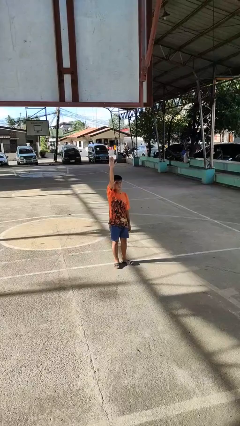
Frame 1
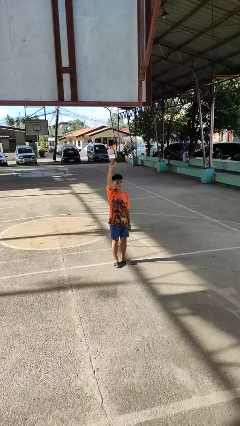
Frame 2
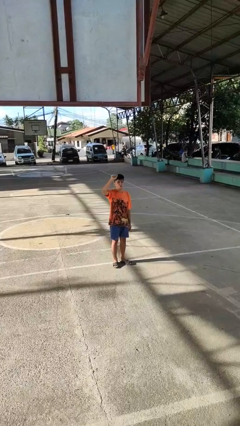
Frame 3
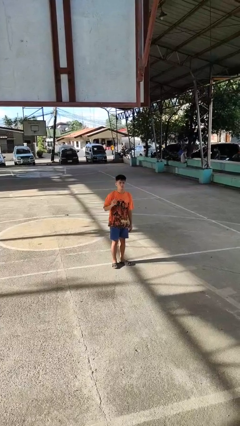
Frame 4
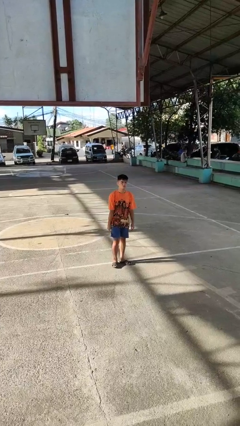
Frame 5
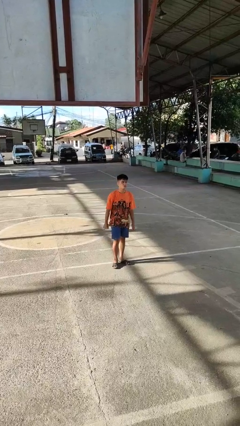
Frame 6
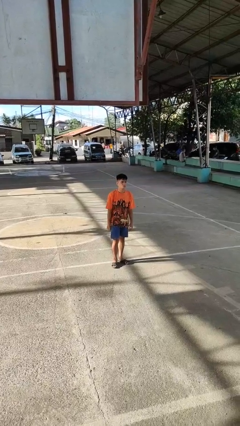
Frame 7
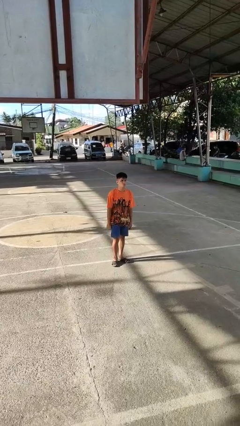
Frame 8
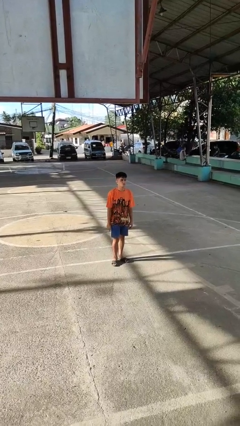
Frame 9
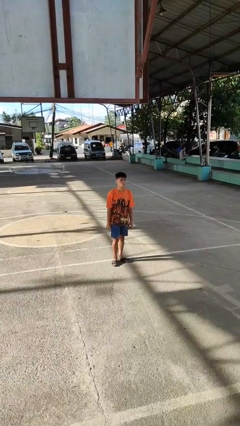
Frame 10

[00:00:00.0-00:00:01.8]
person gestures lower hand

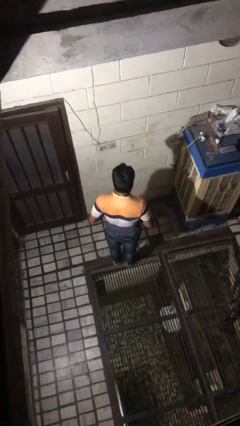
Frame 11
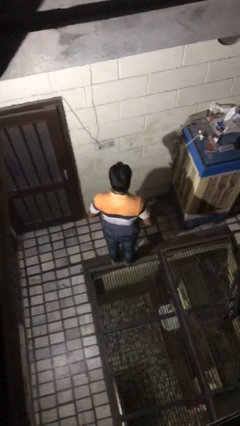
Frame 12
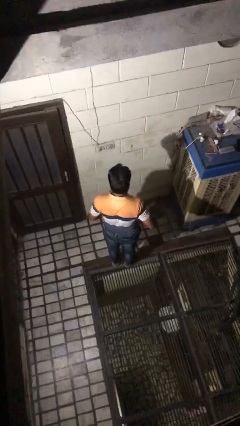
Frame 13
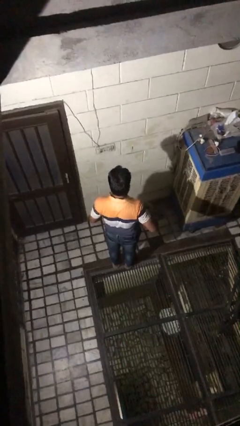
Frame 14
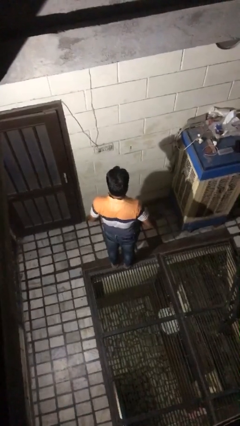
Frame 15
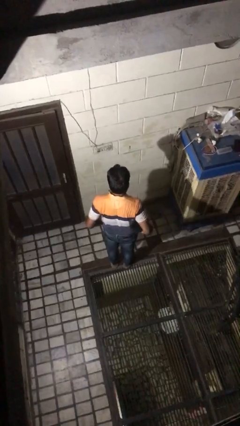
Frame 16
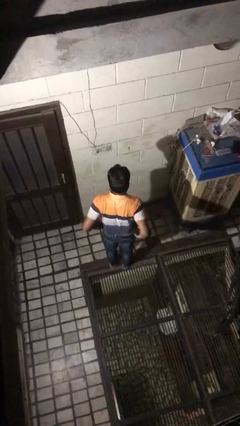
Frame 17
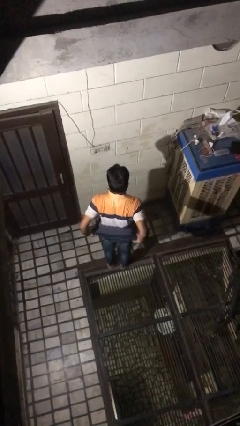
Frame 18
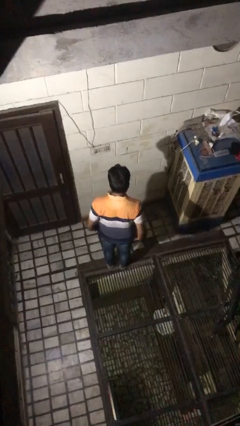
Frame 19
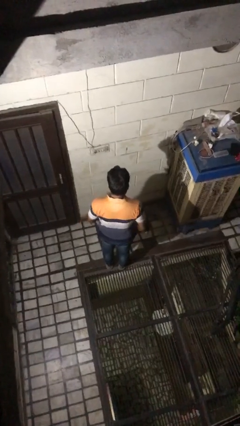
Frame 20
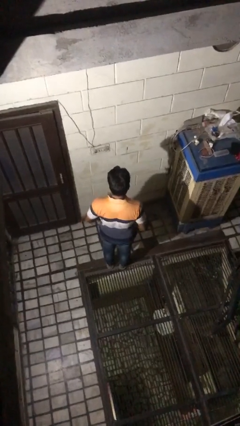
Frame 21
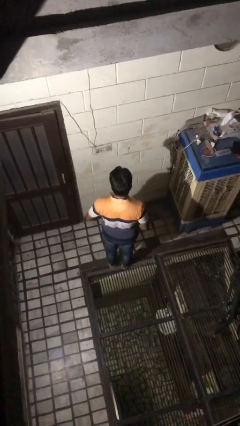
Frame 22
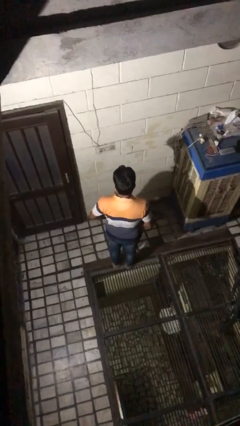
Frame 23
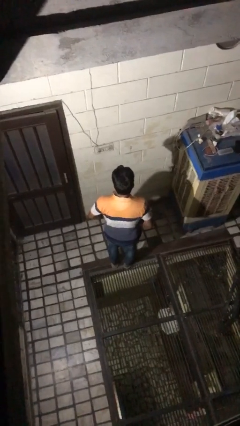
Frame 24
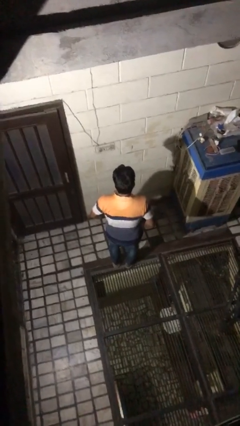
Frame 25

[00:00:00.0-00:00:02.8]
person untucks shirt

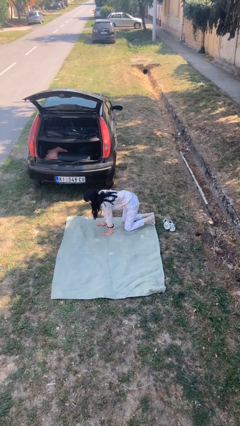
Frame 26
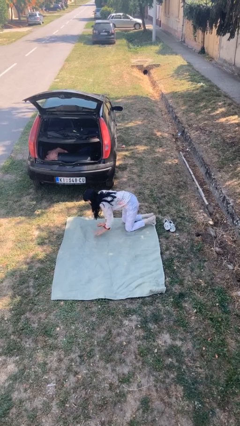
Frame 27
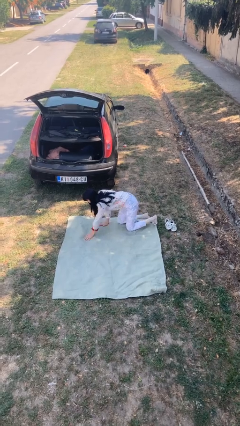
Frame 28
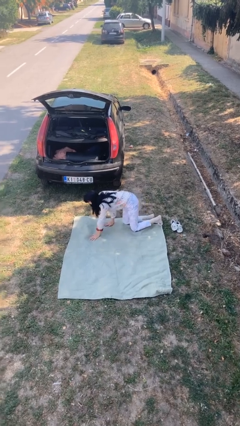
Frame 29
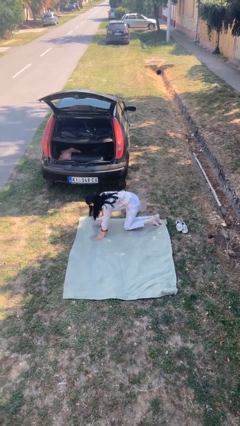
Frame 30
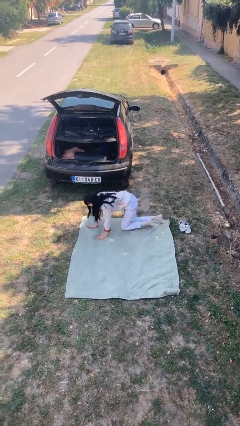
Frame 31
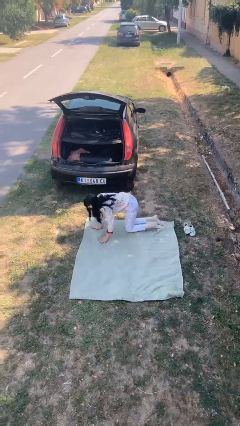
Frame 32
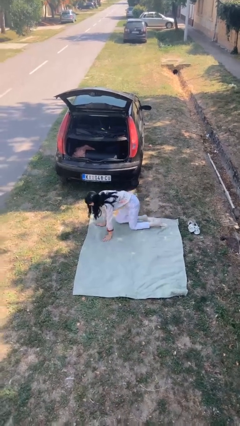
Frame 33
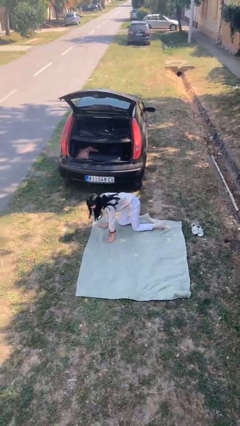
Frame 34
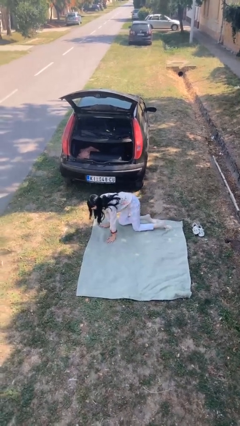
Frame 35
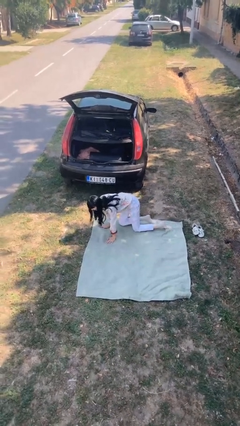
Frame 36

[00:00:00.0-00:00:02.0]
person crawls

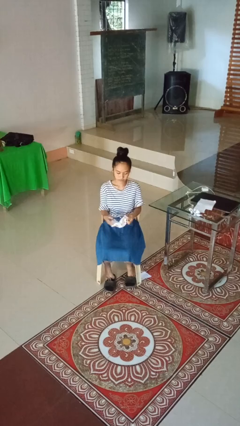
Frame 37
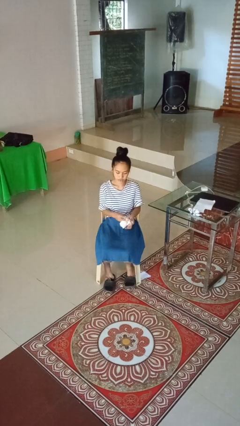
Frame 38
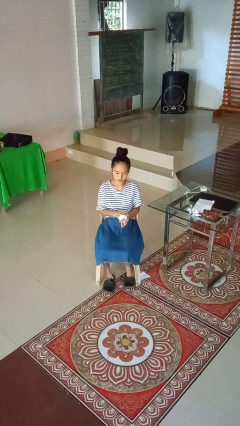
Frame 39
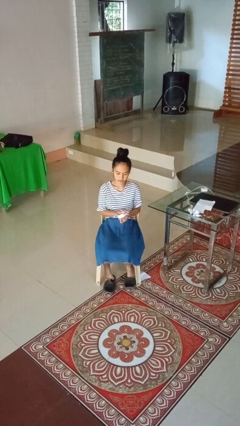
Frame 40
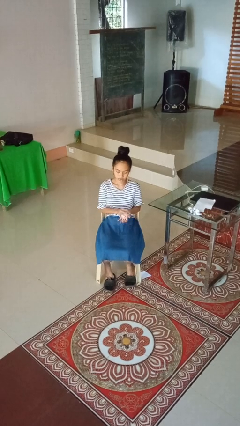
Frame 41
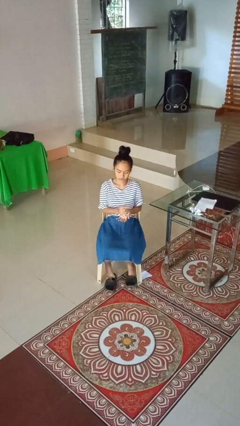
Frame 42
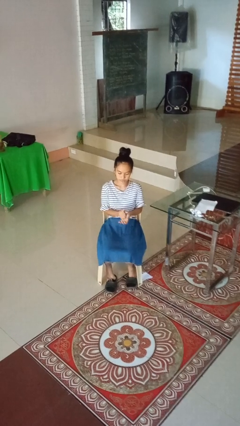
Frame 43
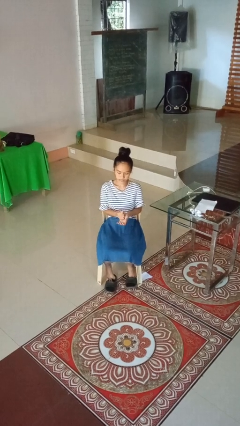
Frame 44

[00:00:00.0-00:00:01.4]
person crumples paper

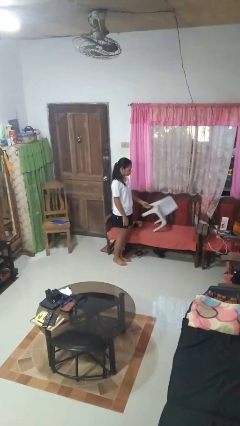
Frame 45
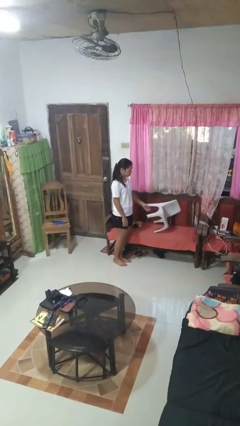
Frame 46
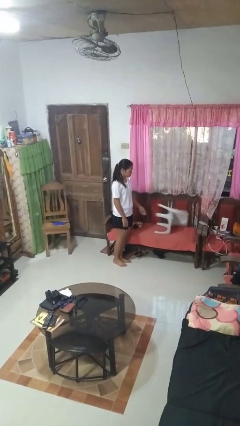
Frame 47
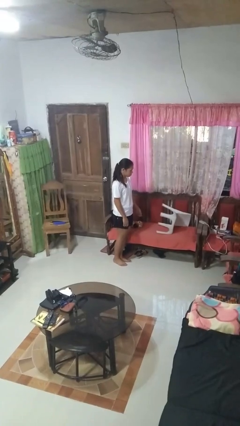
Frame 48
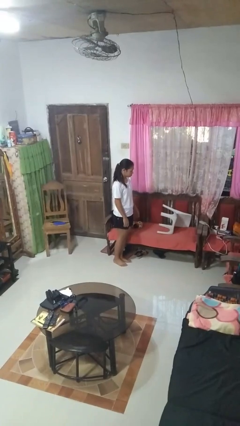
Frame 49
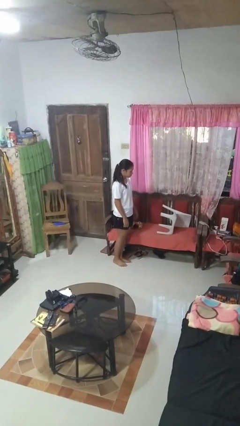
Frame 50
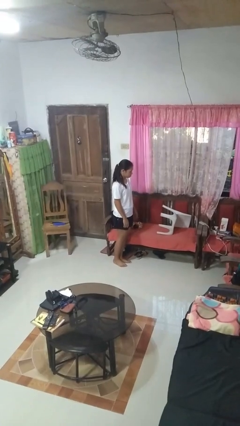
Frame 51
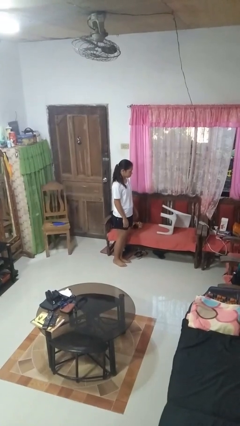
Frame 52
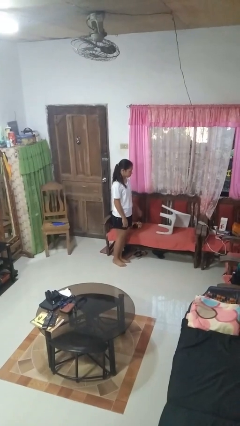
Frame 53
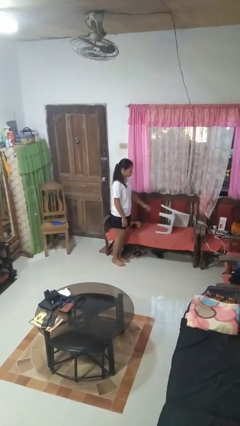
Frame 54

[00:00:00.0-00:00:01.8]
person knocks over furniture

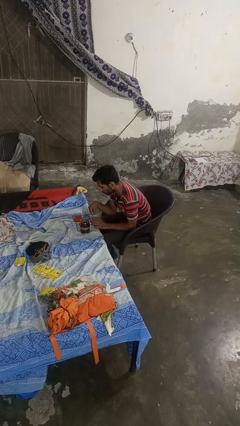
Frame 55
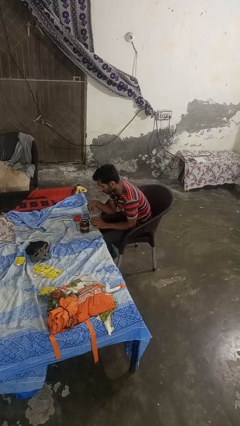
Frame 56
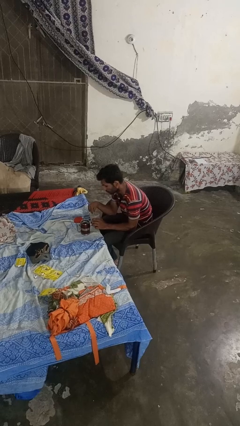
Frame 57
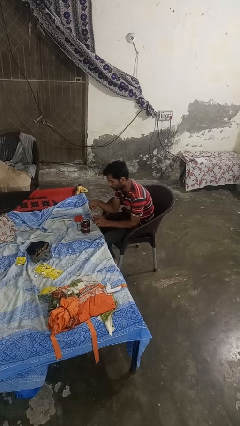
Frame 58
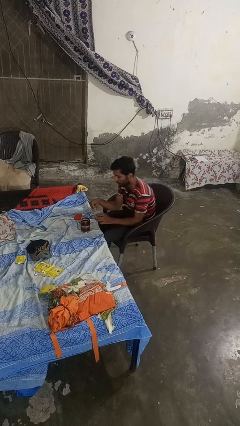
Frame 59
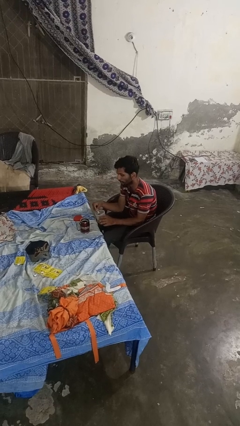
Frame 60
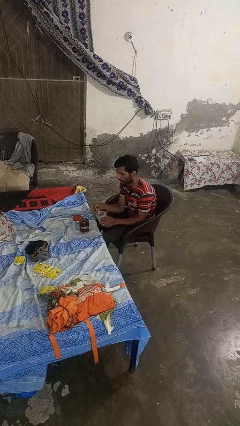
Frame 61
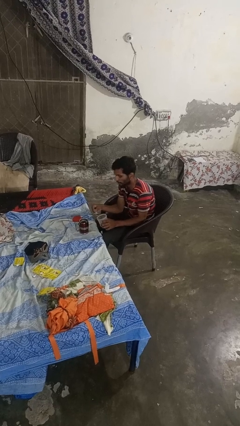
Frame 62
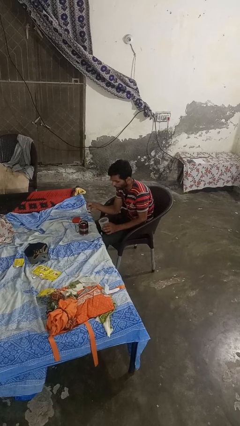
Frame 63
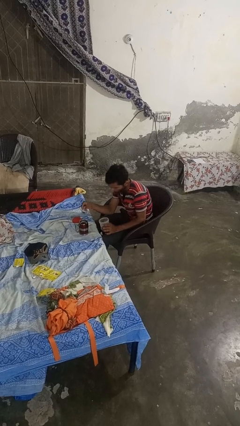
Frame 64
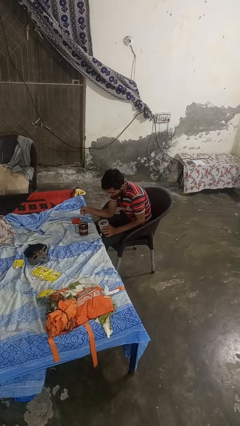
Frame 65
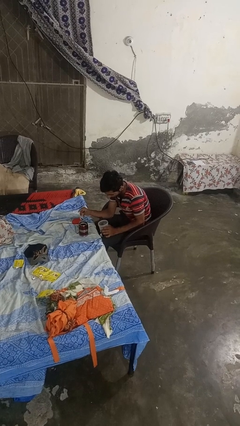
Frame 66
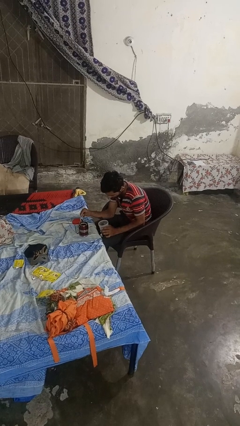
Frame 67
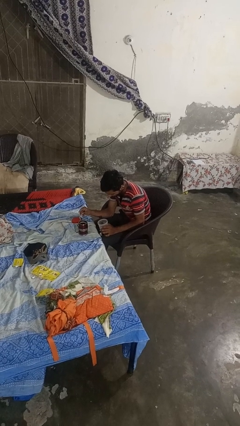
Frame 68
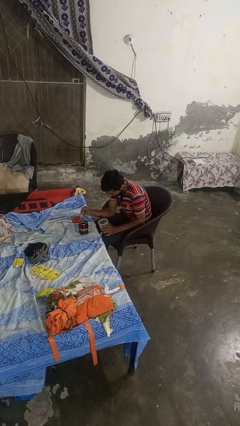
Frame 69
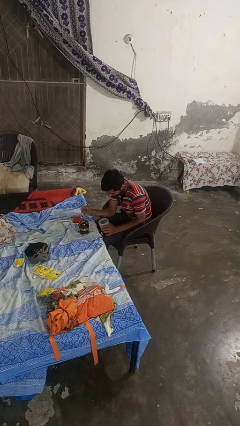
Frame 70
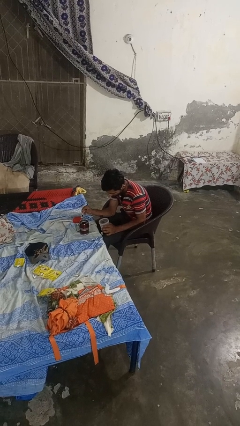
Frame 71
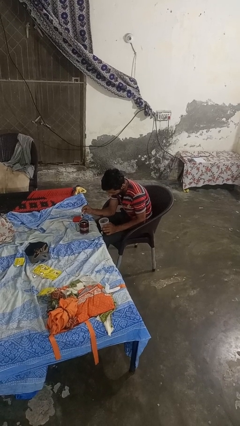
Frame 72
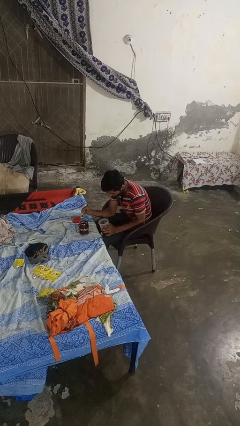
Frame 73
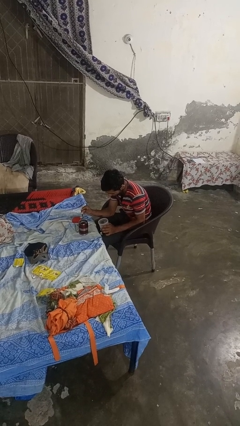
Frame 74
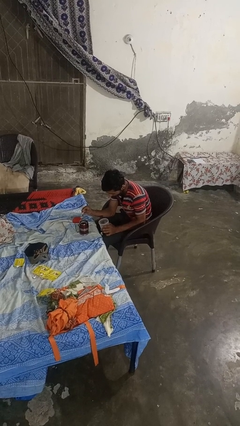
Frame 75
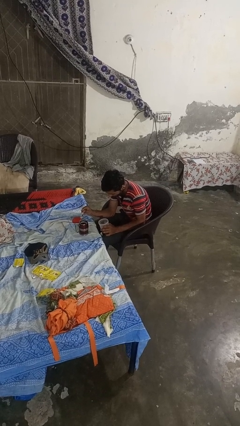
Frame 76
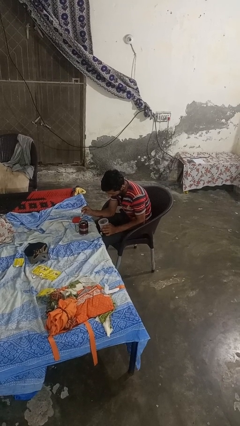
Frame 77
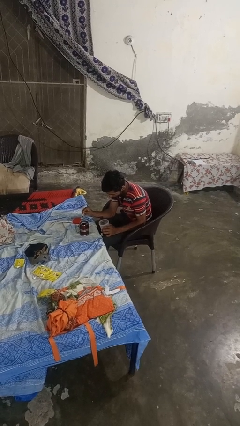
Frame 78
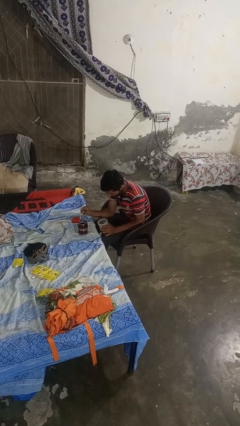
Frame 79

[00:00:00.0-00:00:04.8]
person pours coffee into mug

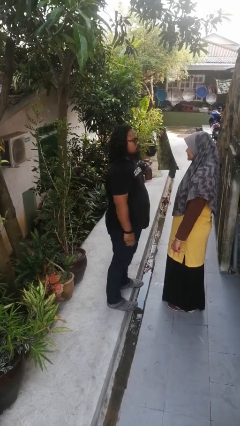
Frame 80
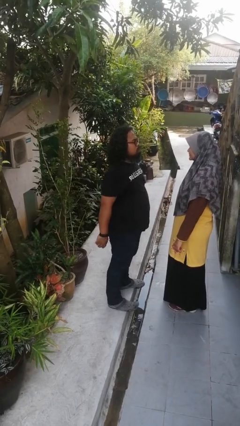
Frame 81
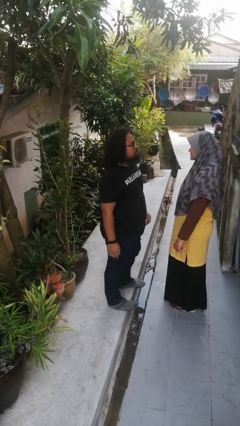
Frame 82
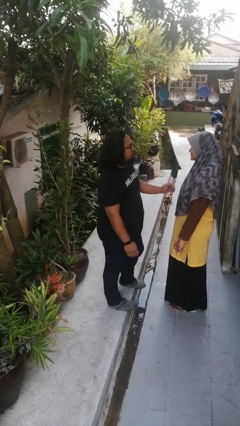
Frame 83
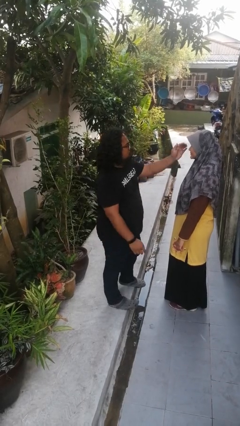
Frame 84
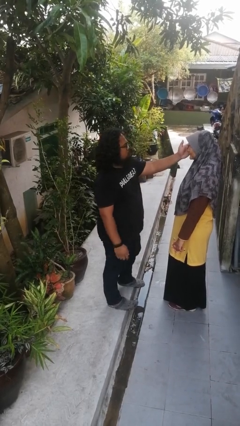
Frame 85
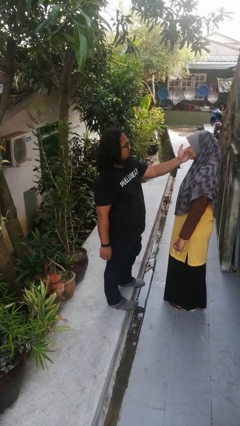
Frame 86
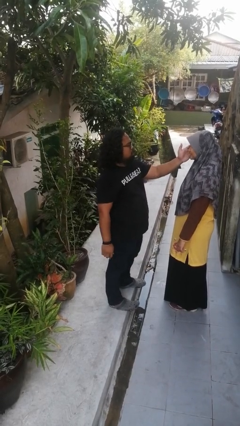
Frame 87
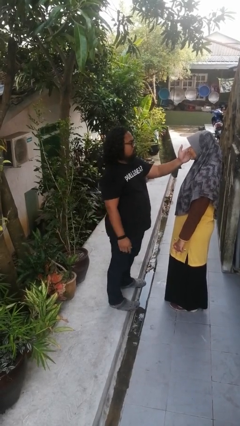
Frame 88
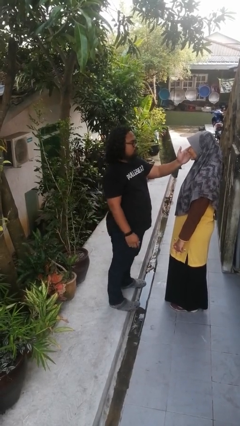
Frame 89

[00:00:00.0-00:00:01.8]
person touches face of person

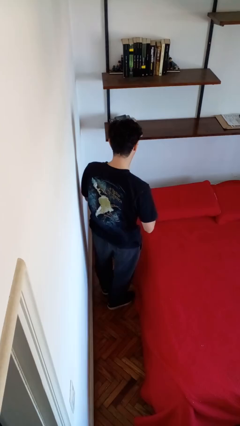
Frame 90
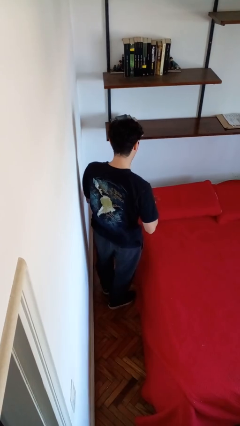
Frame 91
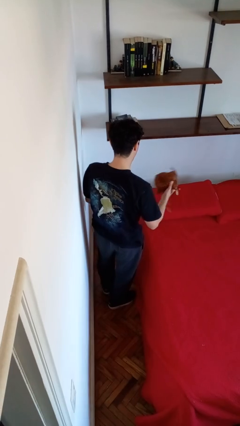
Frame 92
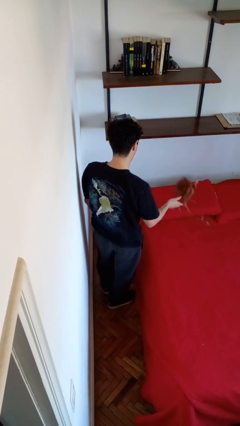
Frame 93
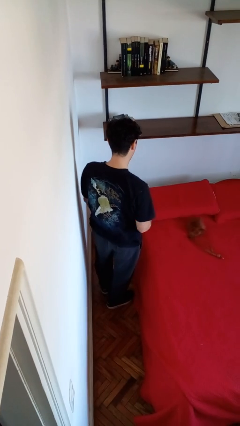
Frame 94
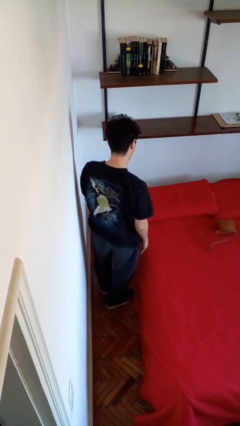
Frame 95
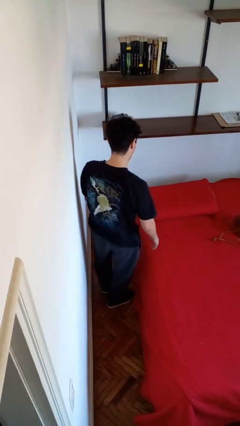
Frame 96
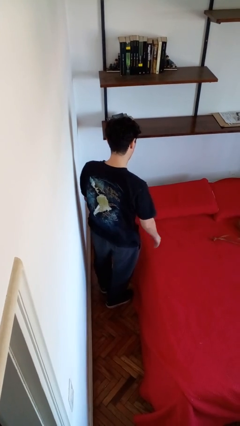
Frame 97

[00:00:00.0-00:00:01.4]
person throws object on bed
